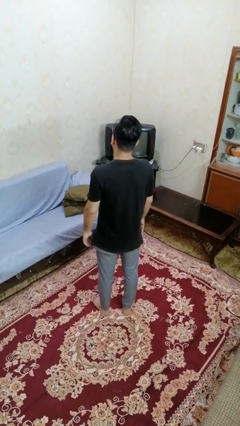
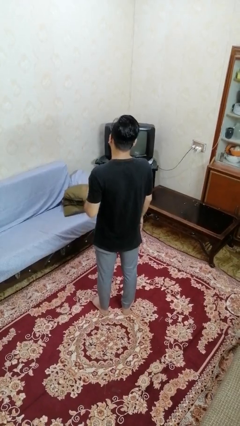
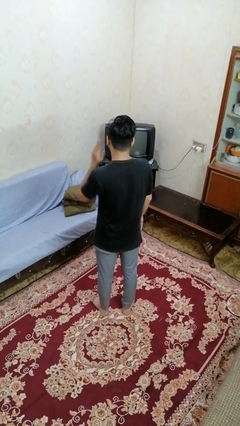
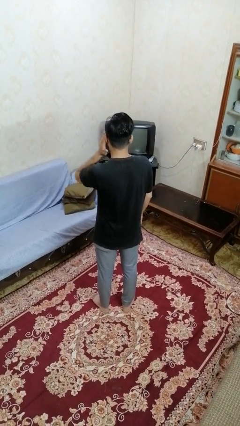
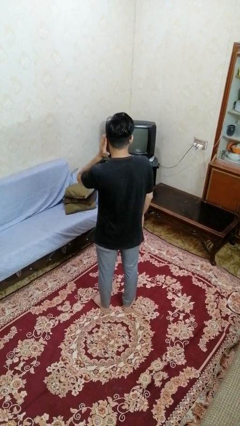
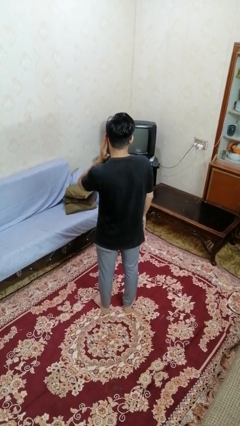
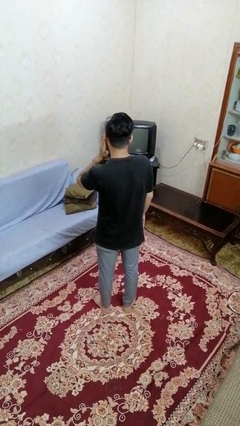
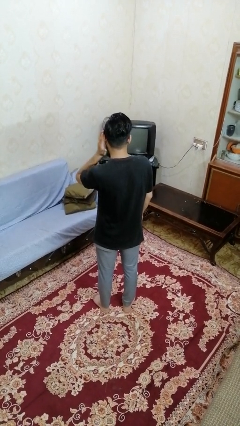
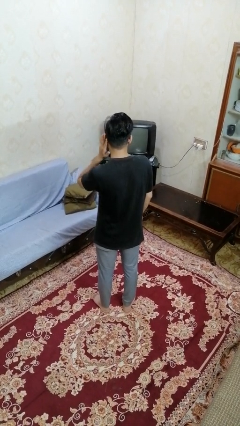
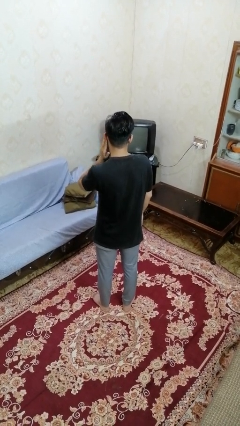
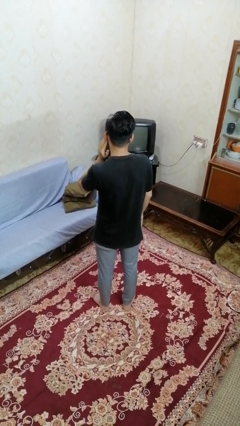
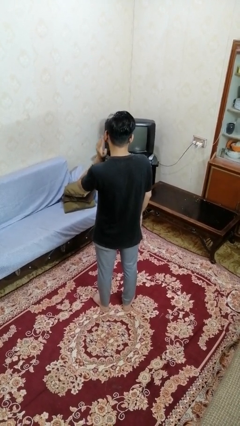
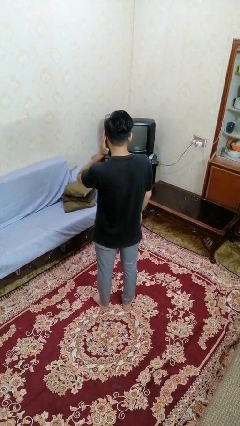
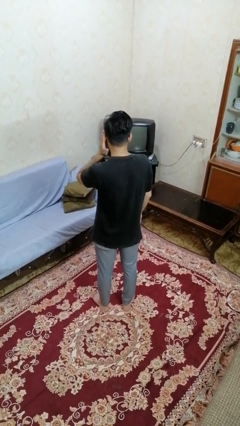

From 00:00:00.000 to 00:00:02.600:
person touches earlobe

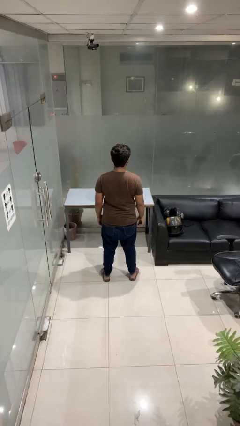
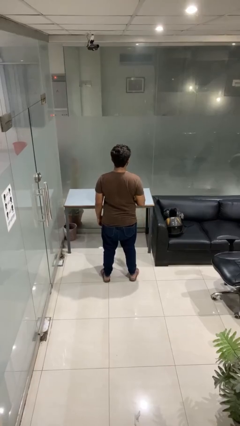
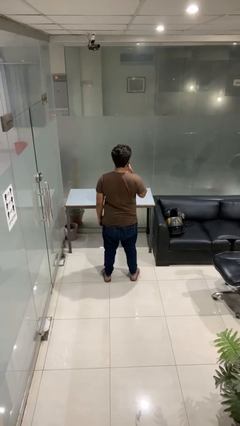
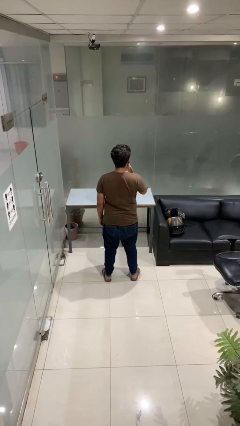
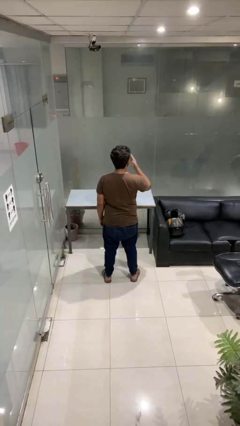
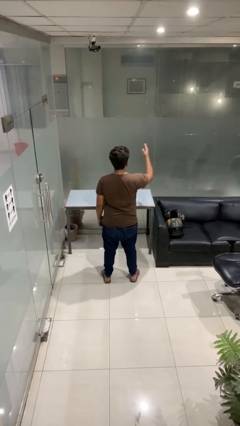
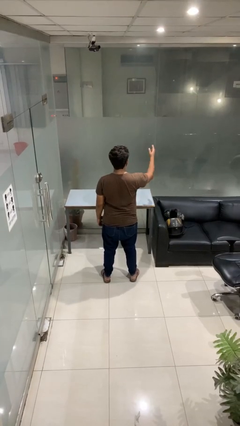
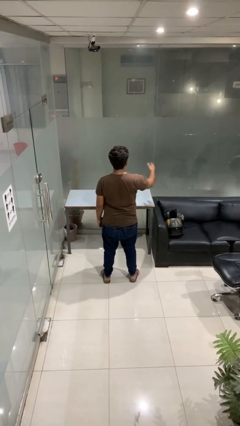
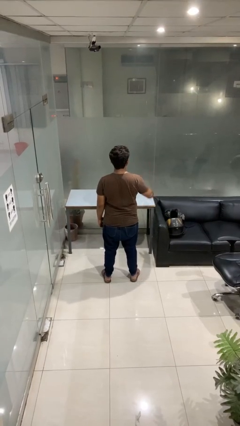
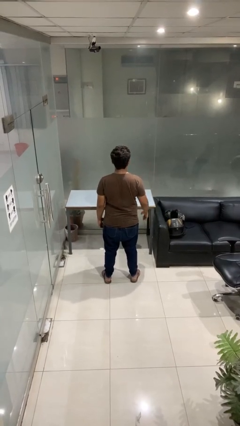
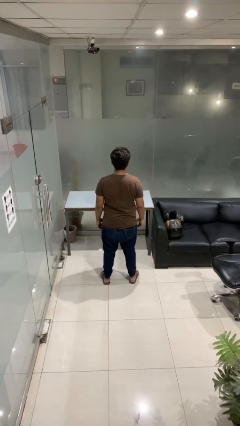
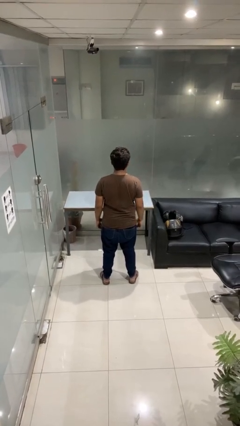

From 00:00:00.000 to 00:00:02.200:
person gestures blow kiss

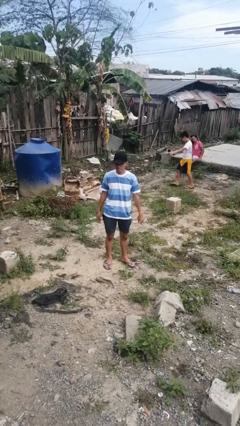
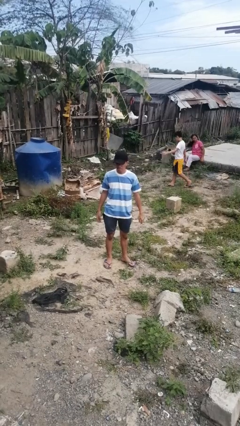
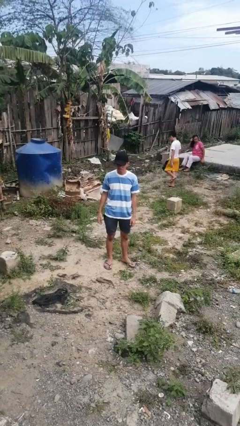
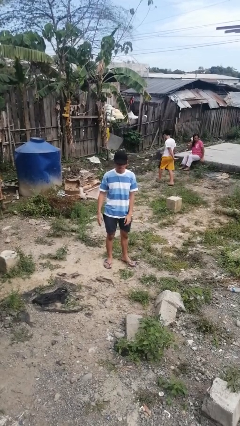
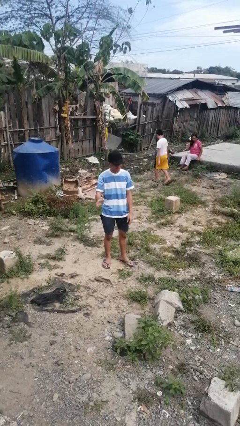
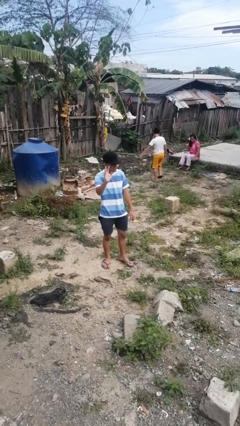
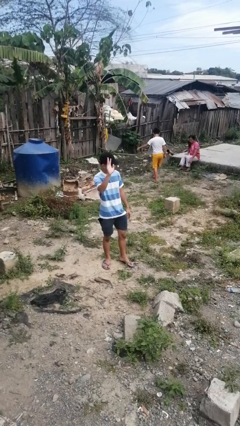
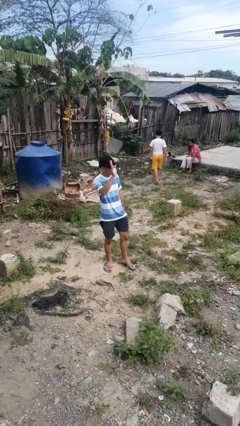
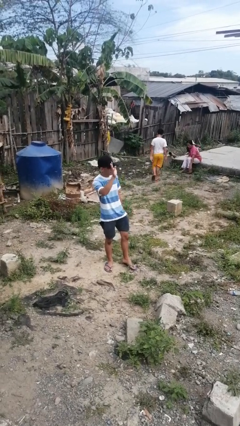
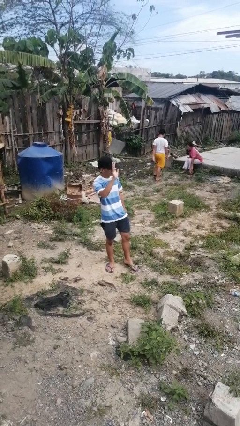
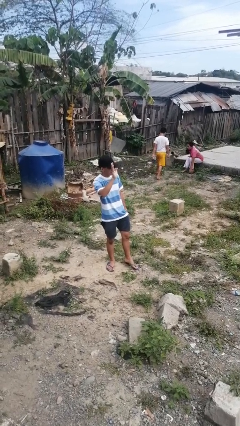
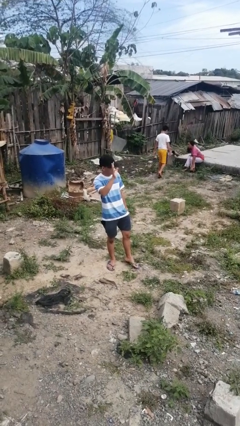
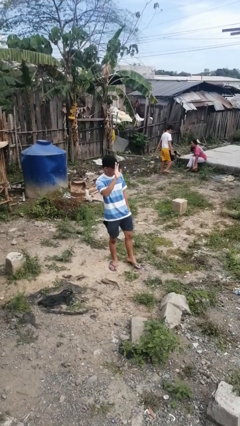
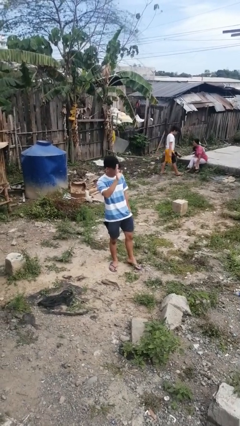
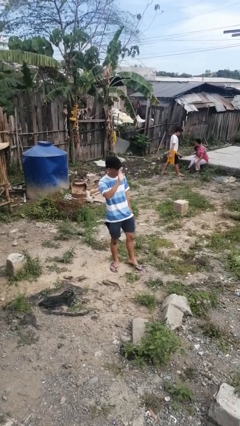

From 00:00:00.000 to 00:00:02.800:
person waves at person

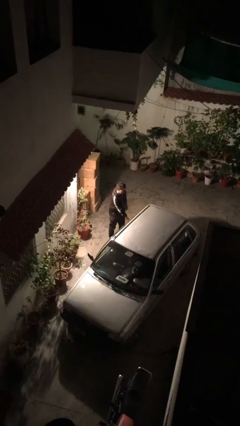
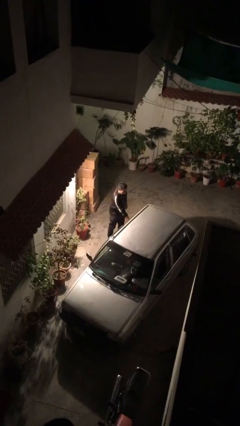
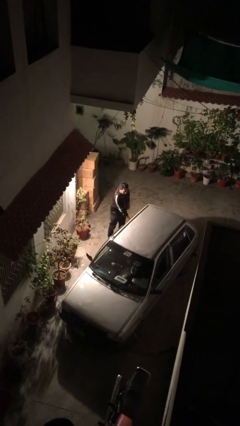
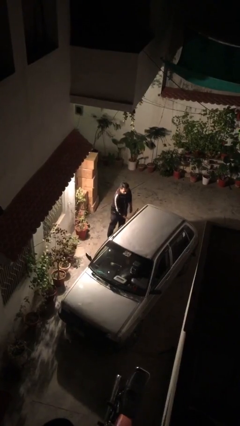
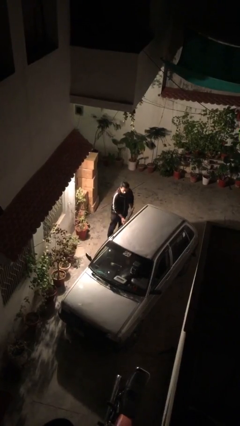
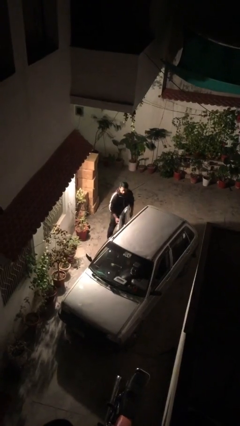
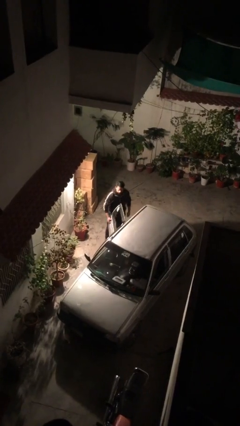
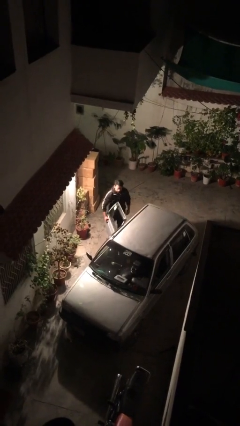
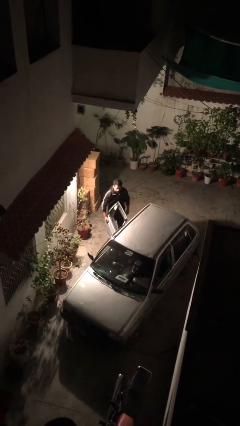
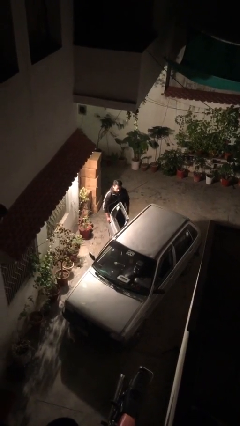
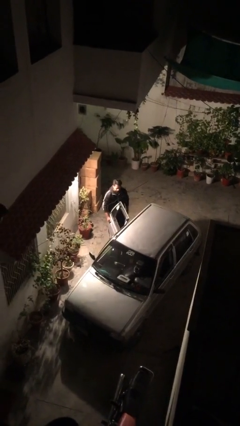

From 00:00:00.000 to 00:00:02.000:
person opens car door

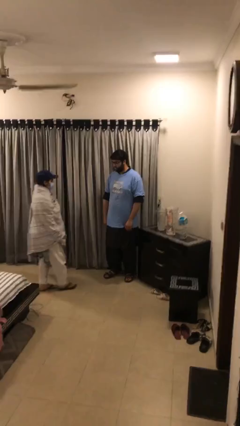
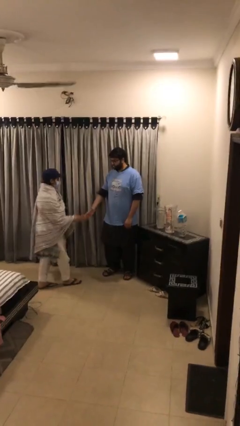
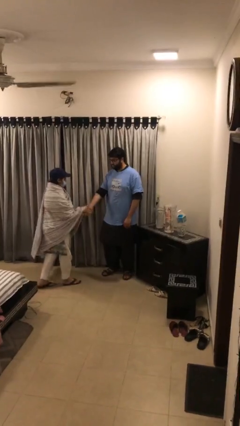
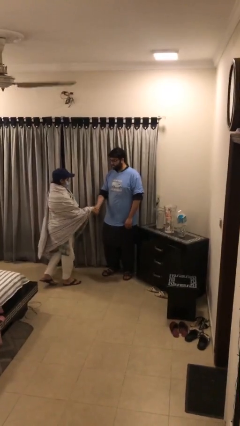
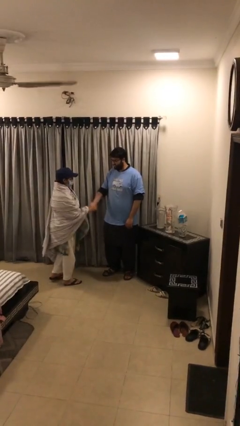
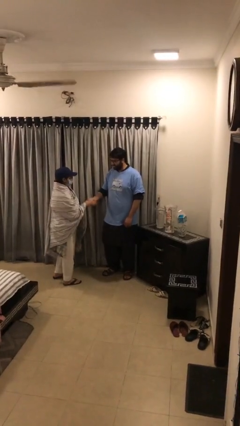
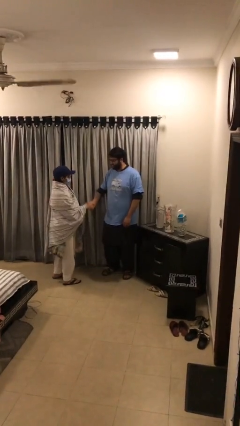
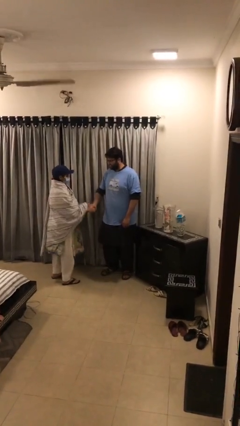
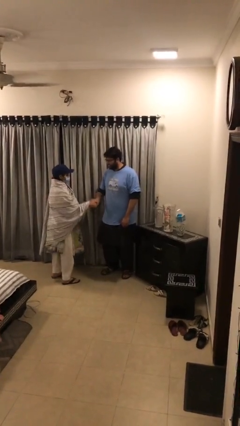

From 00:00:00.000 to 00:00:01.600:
person shakes hand

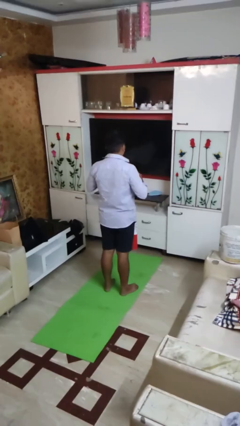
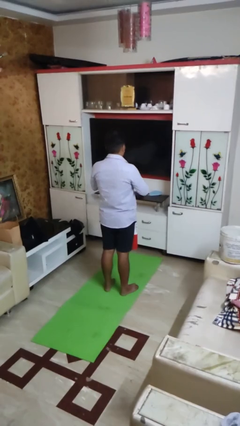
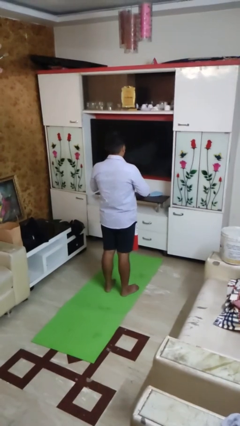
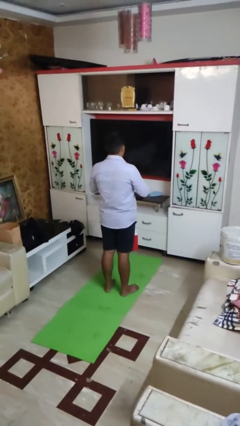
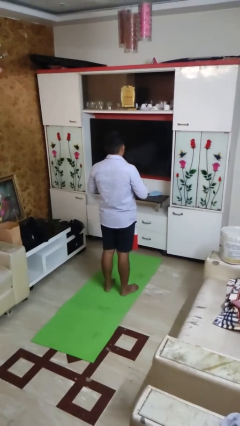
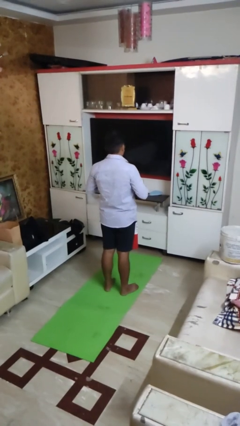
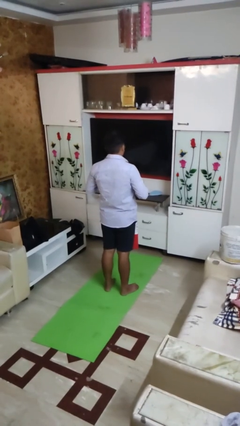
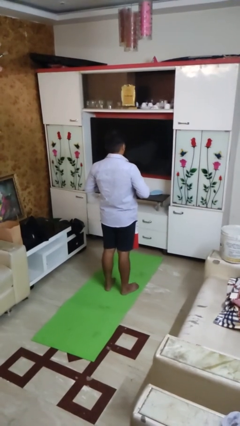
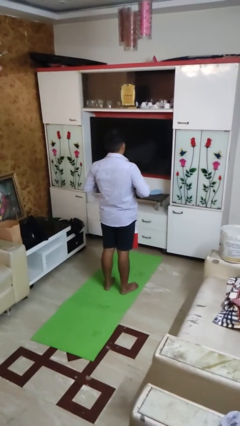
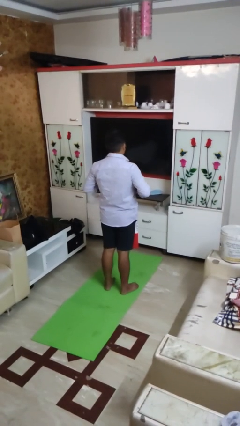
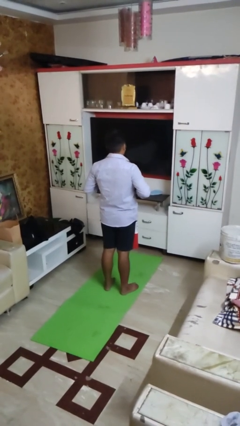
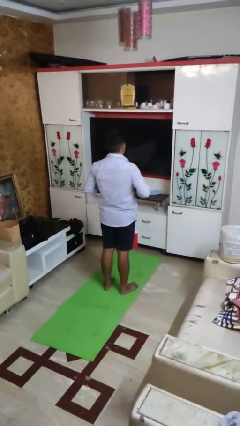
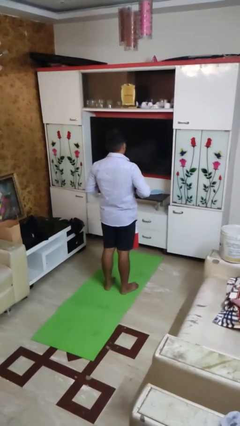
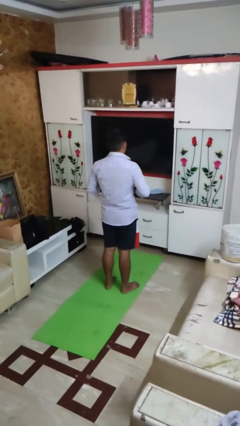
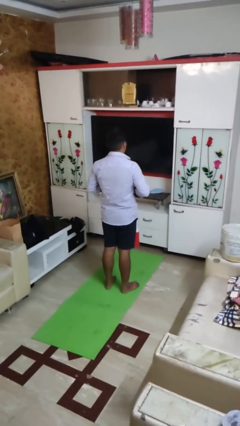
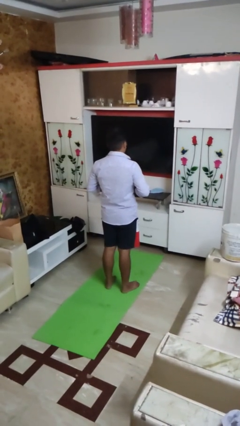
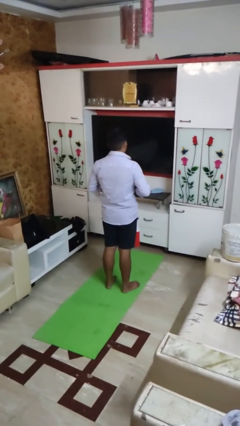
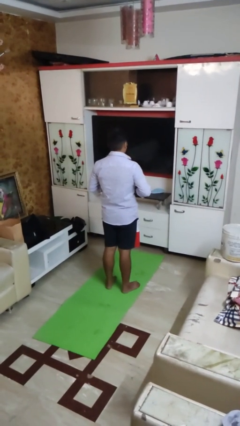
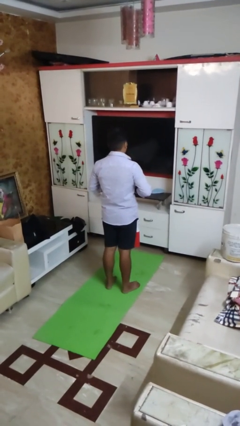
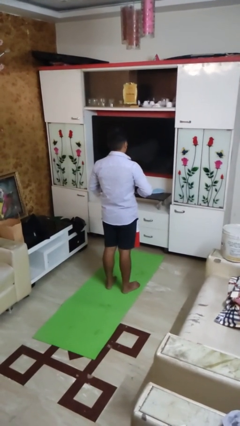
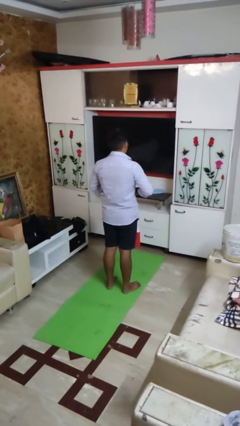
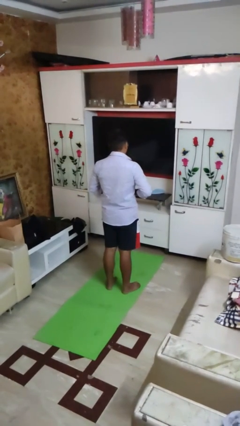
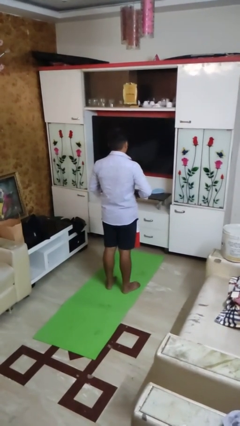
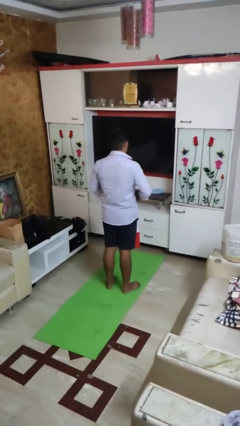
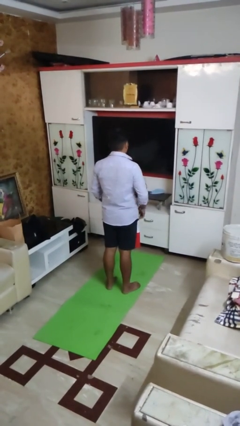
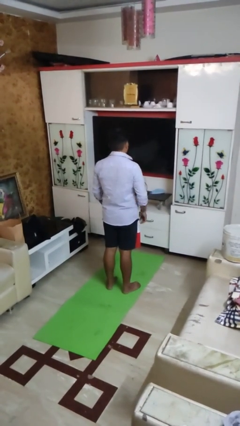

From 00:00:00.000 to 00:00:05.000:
person buttons shirt

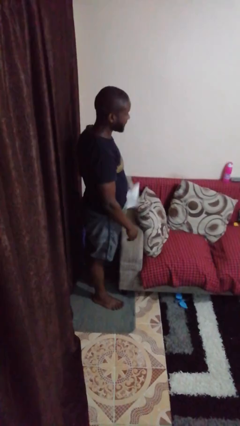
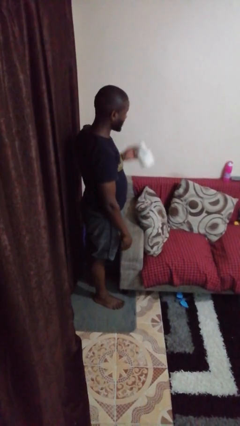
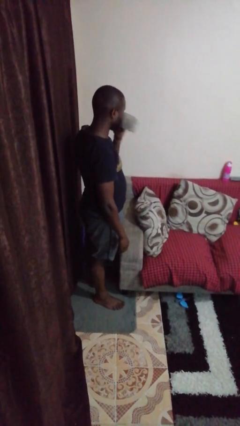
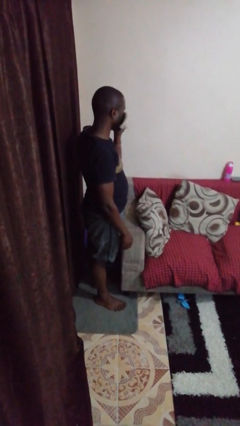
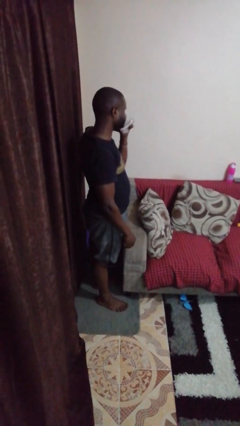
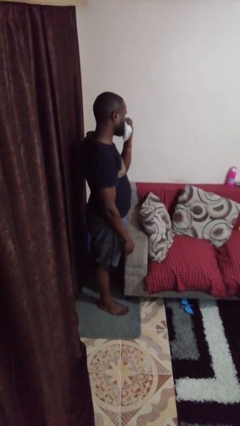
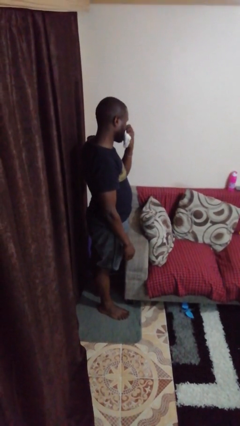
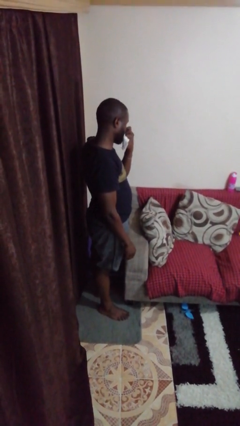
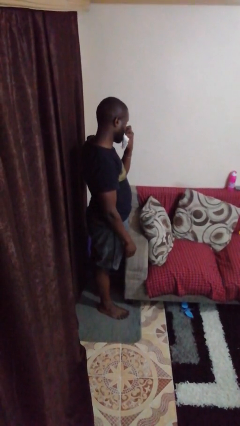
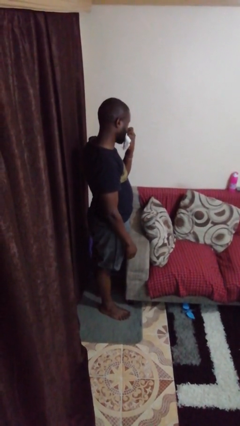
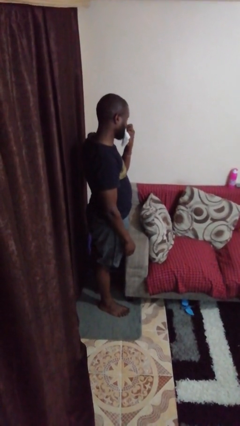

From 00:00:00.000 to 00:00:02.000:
person blows nose
